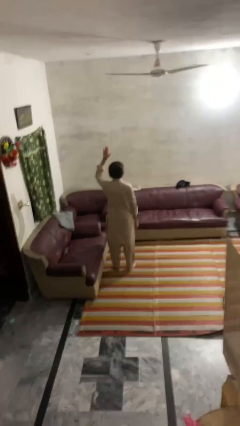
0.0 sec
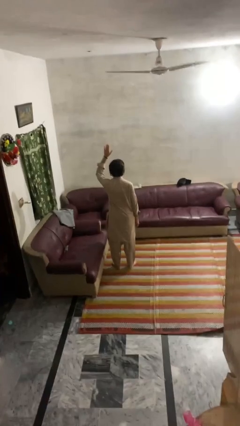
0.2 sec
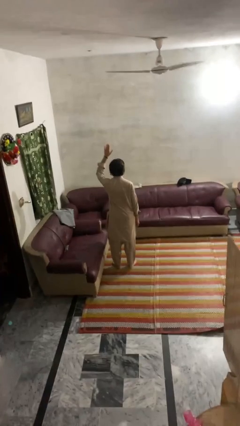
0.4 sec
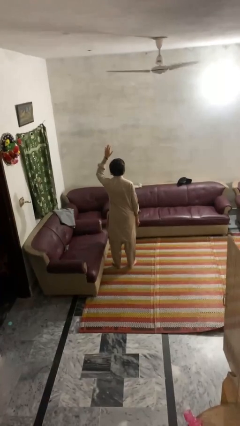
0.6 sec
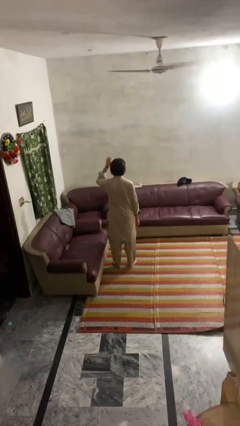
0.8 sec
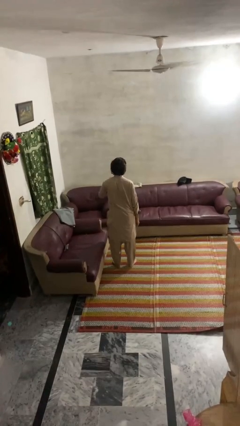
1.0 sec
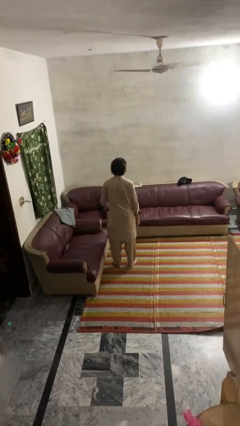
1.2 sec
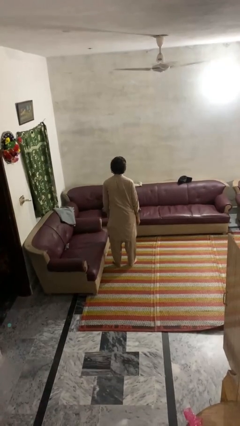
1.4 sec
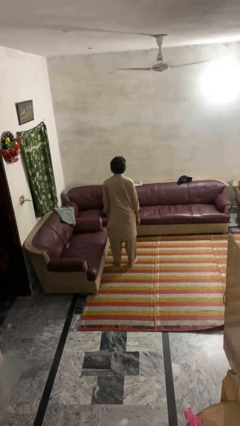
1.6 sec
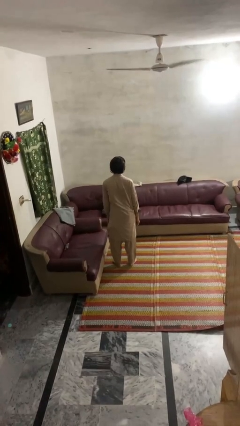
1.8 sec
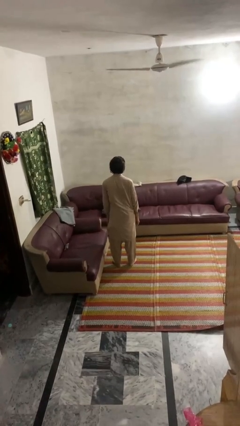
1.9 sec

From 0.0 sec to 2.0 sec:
person gestures lower hand

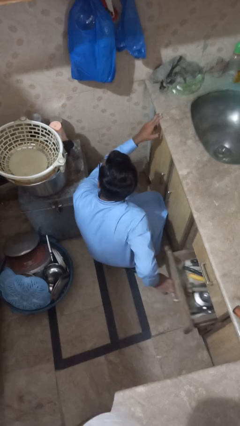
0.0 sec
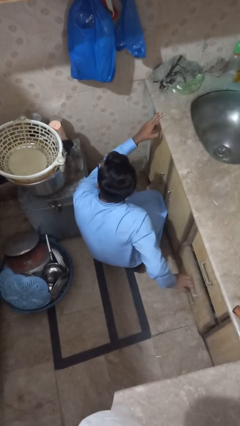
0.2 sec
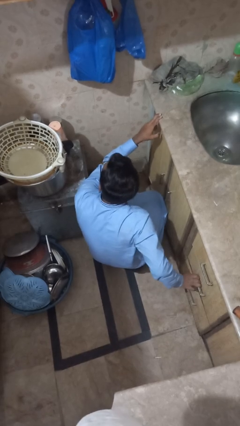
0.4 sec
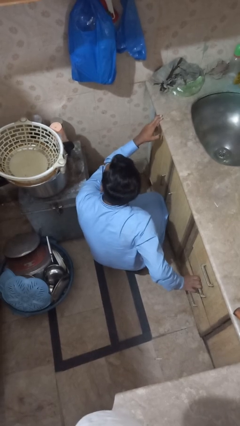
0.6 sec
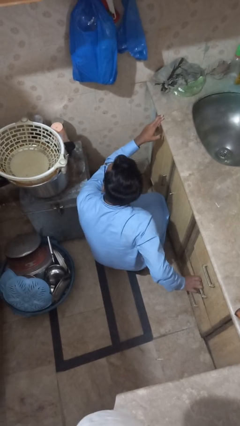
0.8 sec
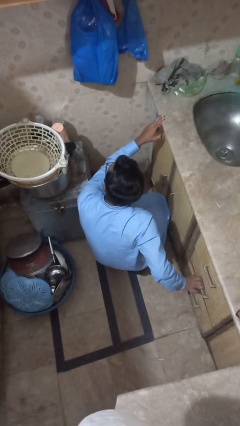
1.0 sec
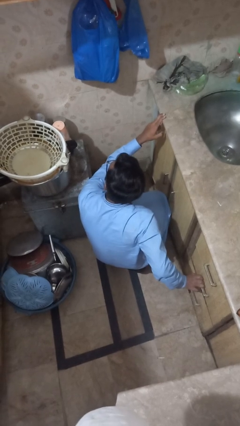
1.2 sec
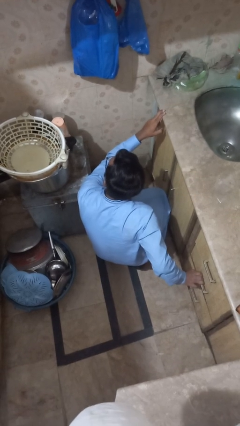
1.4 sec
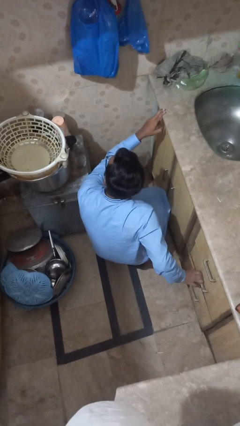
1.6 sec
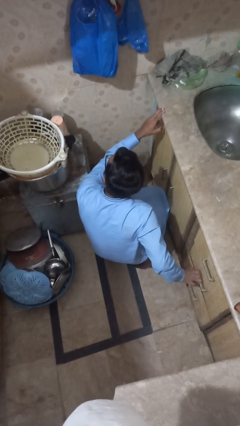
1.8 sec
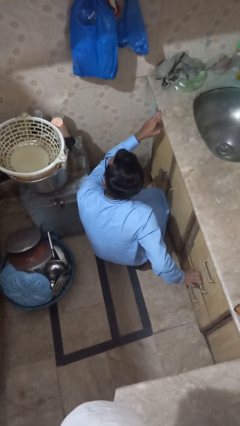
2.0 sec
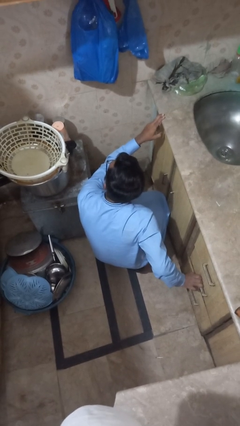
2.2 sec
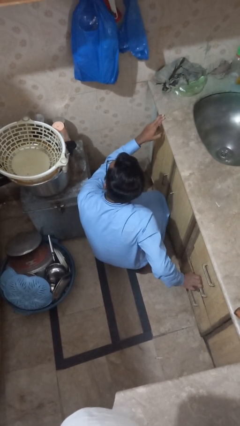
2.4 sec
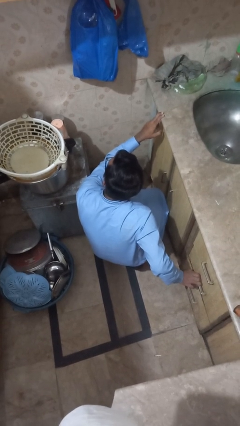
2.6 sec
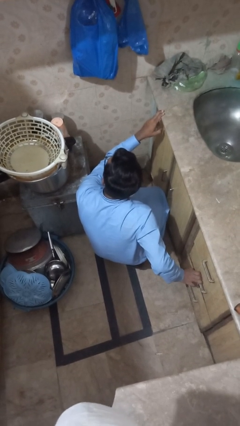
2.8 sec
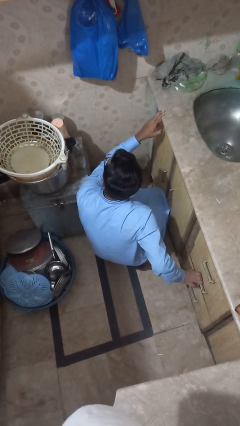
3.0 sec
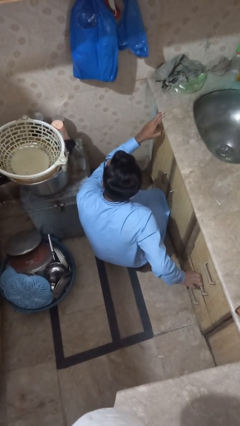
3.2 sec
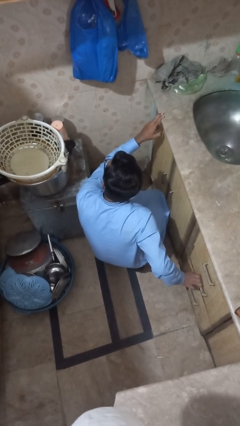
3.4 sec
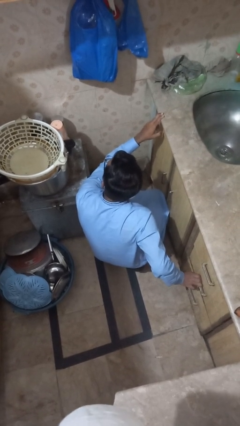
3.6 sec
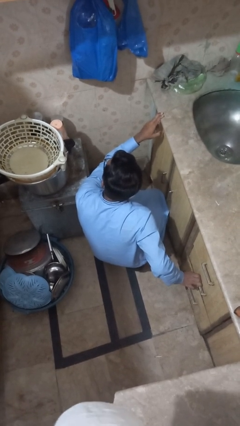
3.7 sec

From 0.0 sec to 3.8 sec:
person closes kitchen drawer

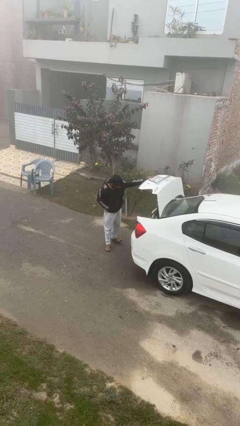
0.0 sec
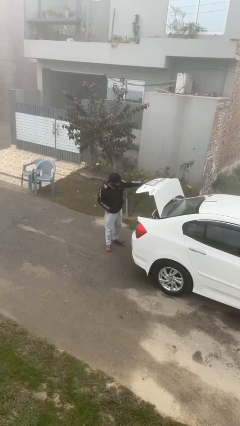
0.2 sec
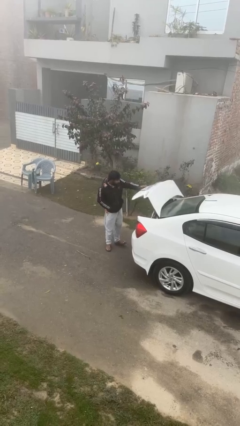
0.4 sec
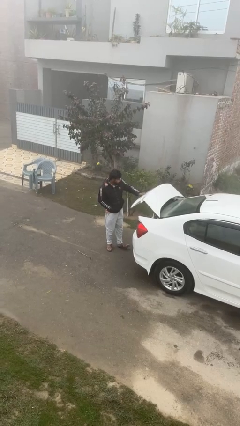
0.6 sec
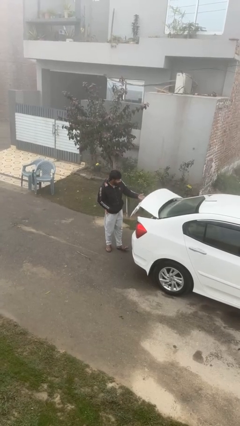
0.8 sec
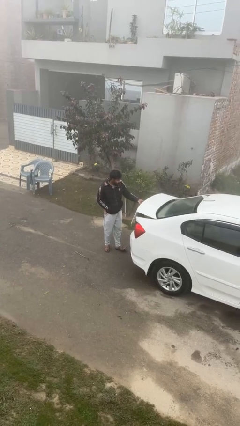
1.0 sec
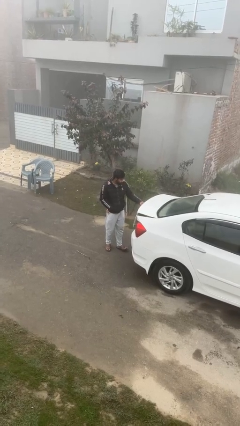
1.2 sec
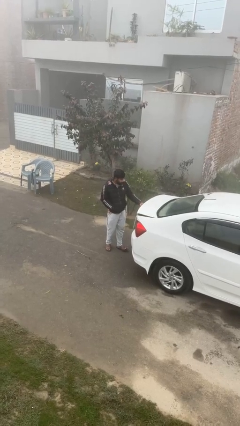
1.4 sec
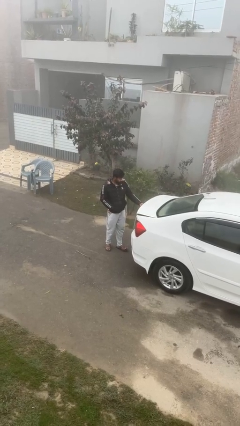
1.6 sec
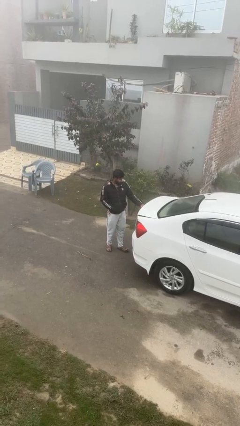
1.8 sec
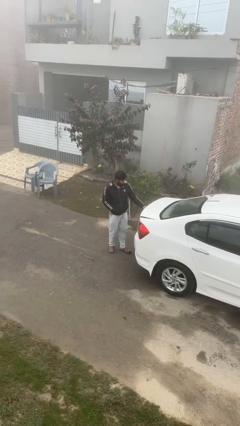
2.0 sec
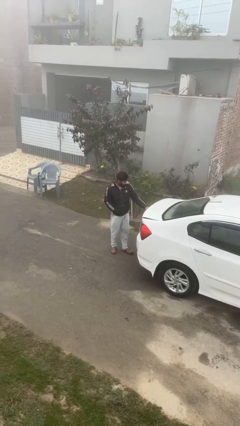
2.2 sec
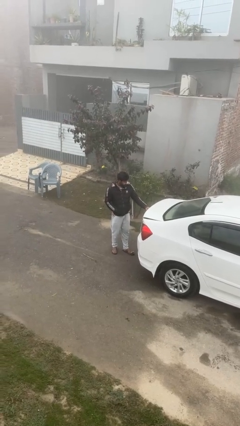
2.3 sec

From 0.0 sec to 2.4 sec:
person closes car trunk

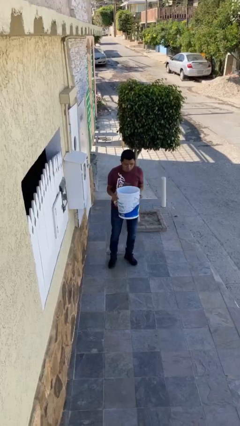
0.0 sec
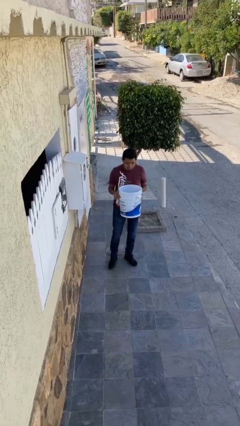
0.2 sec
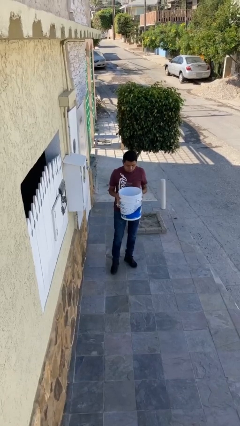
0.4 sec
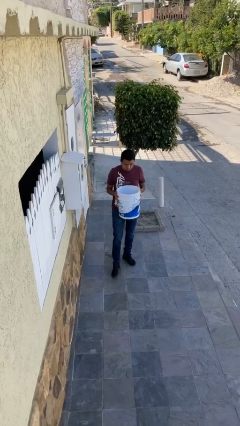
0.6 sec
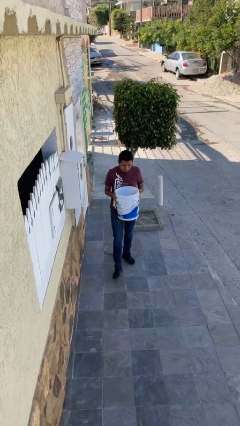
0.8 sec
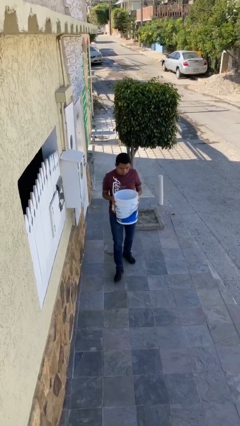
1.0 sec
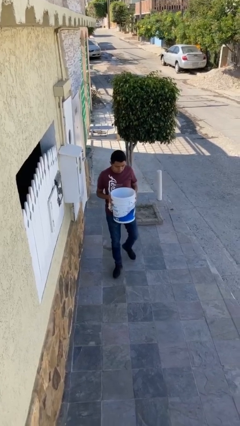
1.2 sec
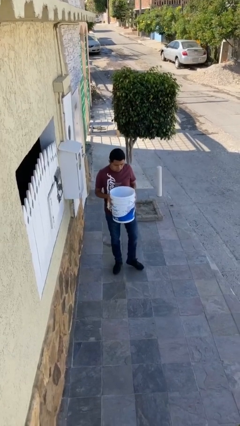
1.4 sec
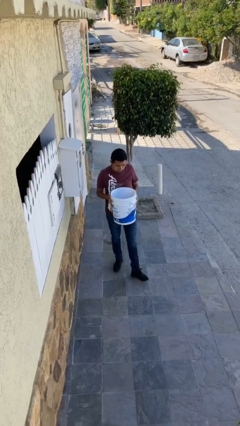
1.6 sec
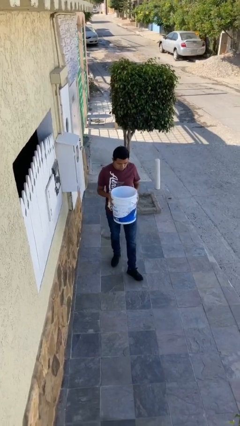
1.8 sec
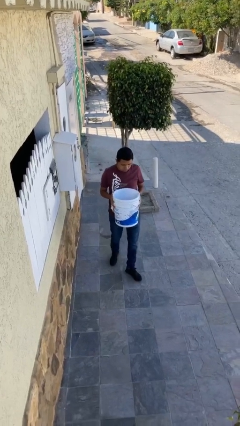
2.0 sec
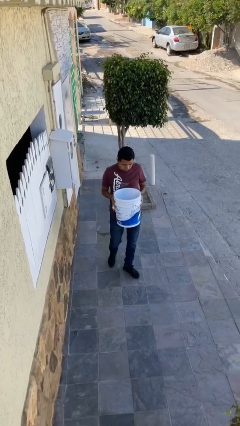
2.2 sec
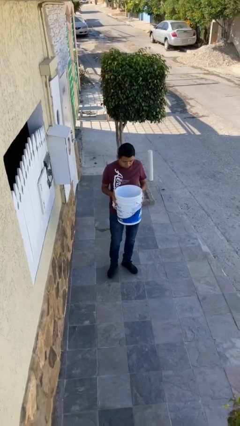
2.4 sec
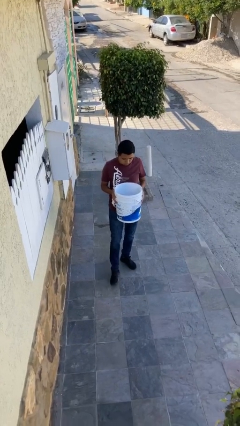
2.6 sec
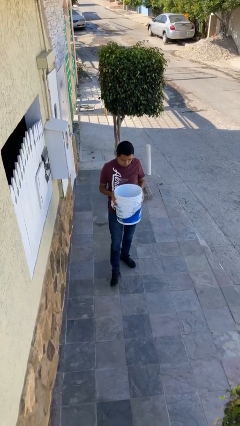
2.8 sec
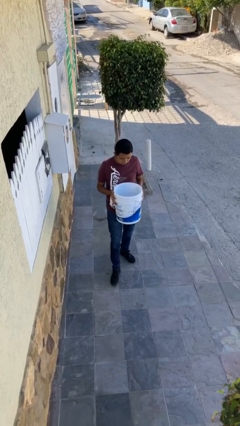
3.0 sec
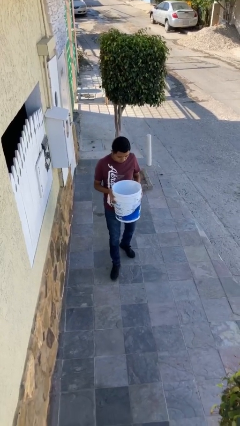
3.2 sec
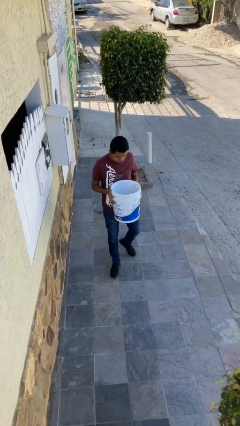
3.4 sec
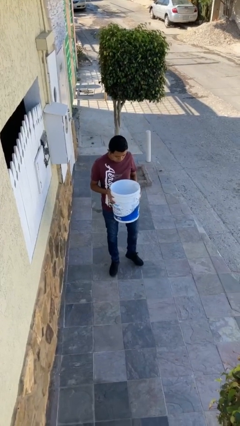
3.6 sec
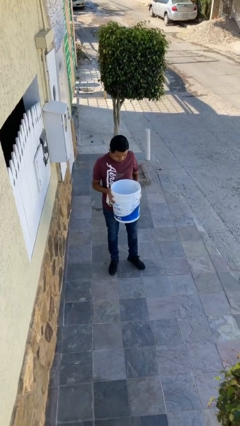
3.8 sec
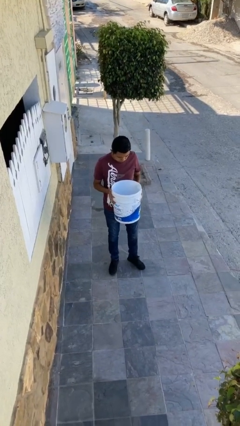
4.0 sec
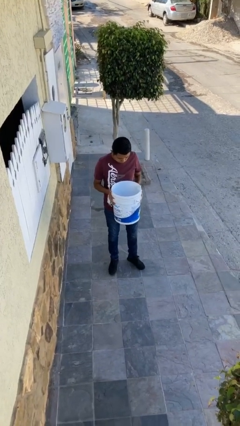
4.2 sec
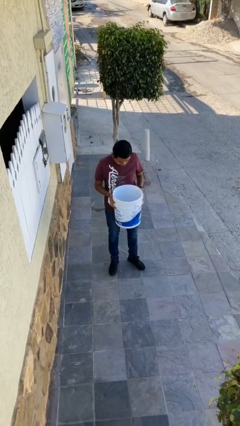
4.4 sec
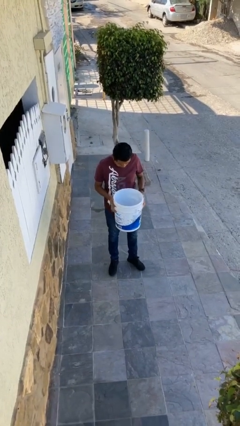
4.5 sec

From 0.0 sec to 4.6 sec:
person carries heavy object

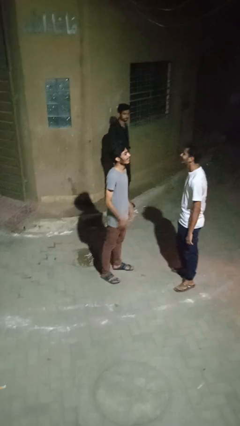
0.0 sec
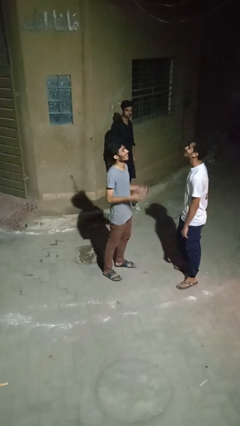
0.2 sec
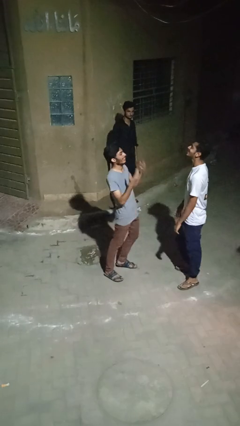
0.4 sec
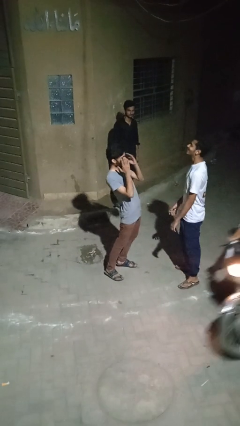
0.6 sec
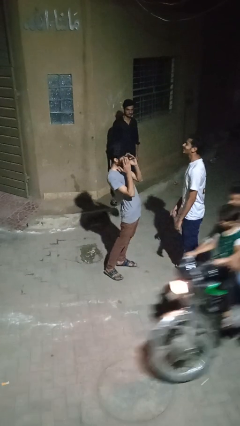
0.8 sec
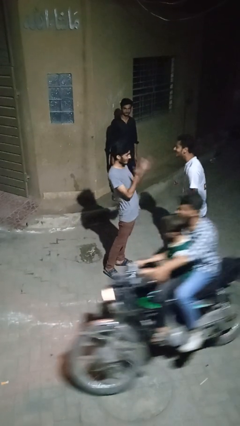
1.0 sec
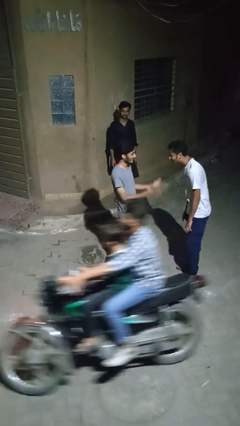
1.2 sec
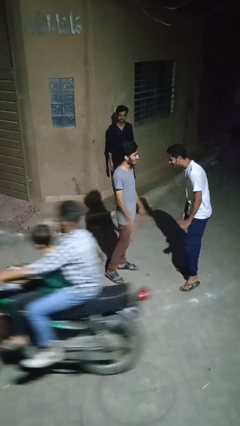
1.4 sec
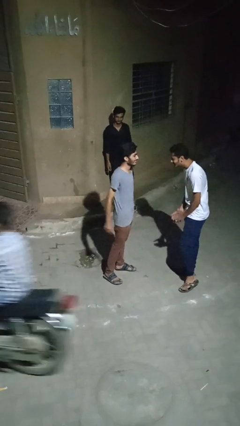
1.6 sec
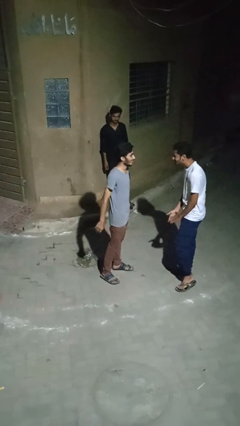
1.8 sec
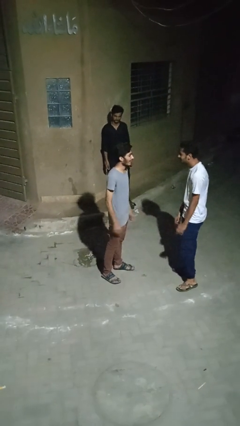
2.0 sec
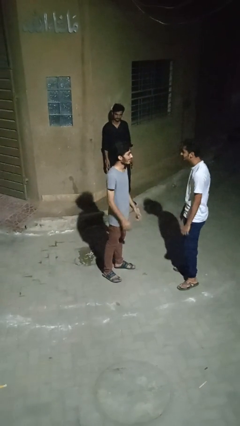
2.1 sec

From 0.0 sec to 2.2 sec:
person laughs with person

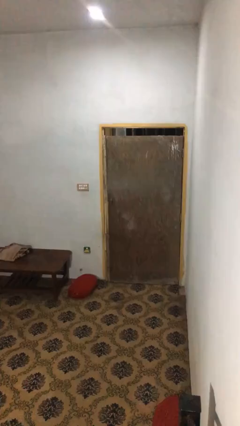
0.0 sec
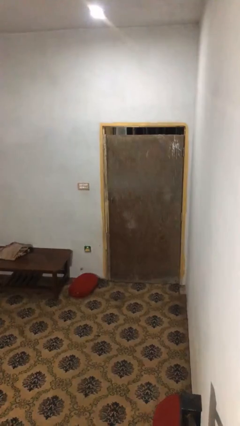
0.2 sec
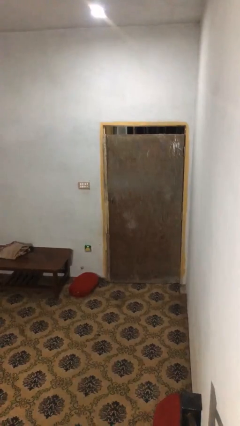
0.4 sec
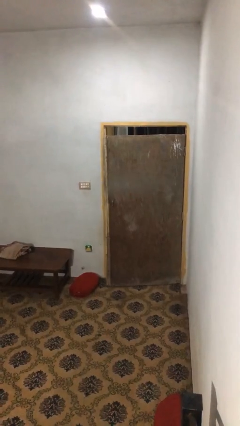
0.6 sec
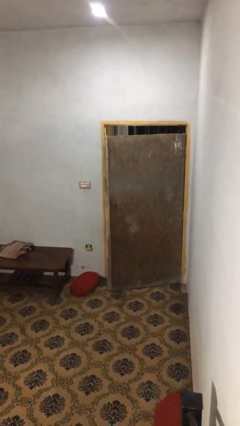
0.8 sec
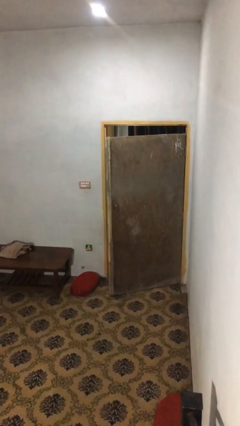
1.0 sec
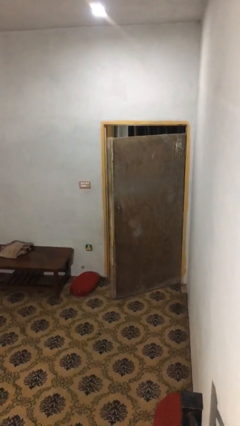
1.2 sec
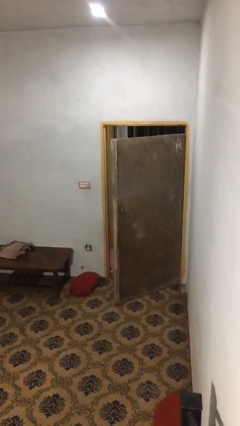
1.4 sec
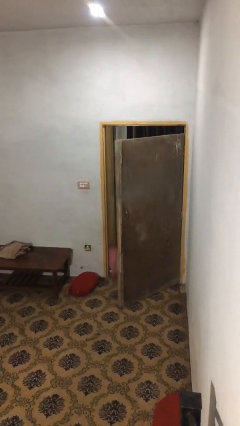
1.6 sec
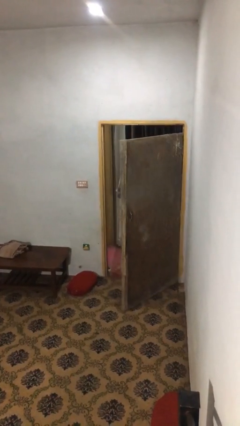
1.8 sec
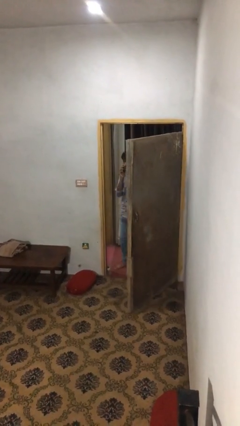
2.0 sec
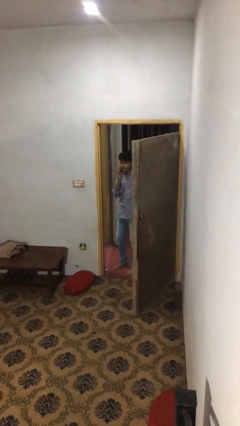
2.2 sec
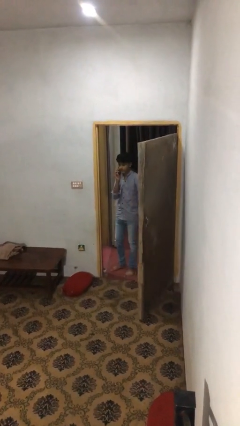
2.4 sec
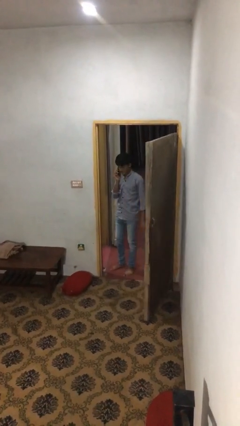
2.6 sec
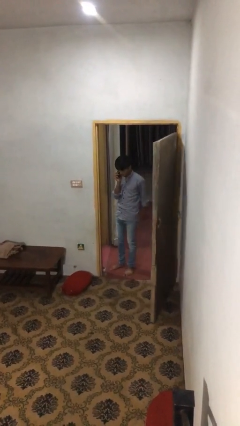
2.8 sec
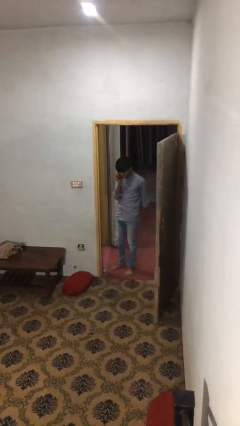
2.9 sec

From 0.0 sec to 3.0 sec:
person opens facility door
